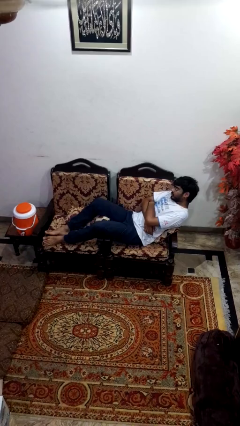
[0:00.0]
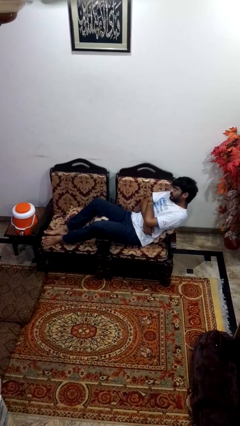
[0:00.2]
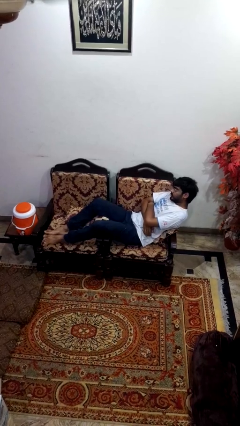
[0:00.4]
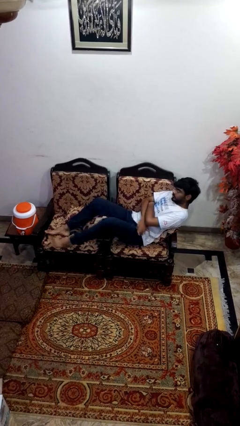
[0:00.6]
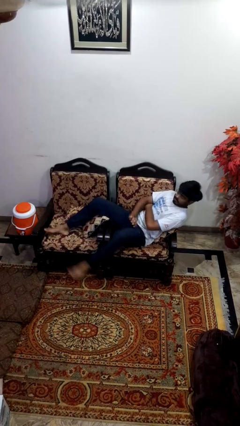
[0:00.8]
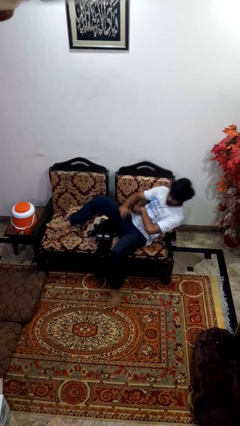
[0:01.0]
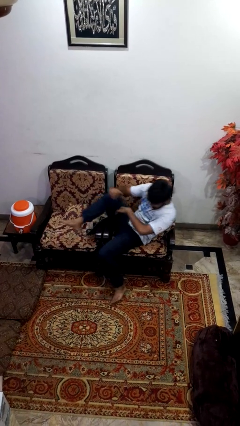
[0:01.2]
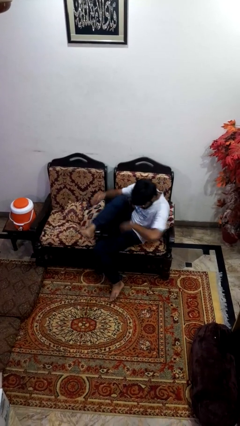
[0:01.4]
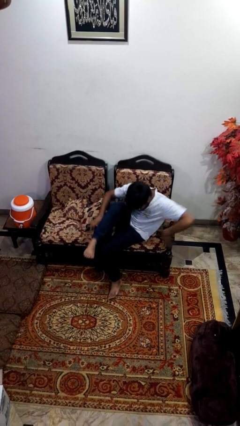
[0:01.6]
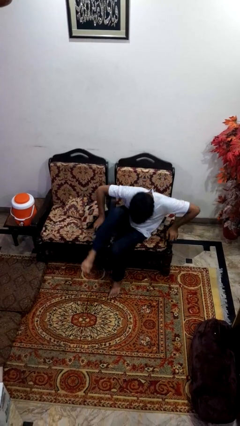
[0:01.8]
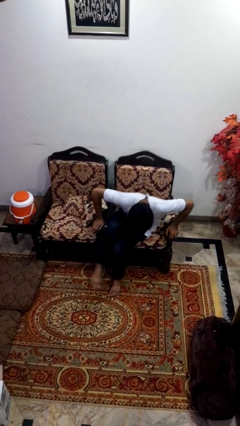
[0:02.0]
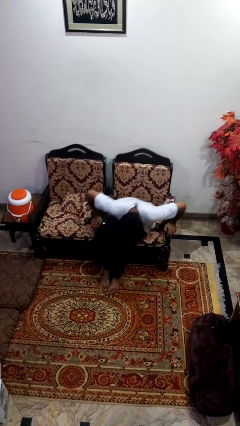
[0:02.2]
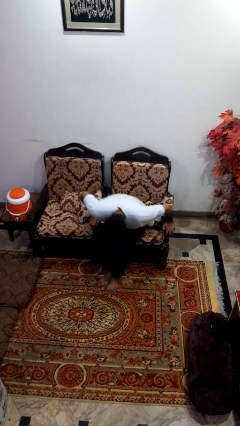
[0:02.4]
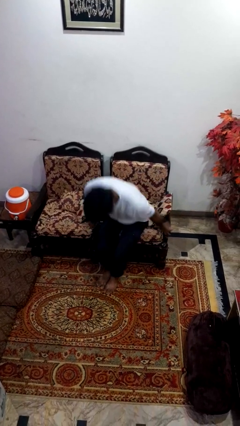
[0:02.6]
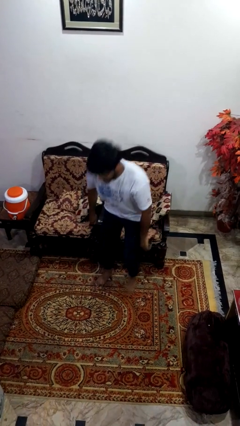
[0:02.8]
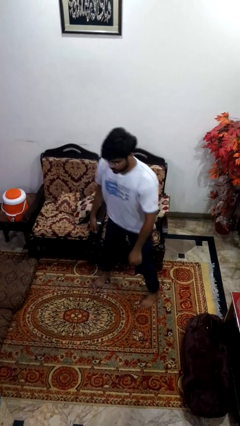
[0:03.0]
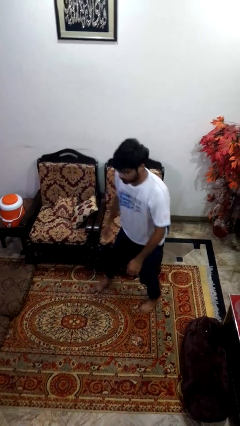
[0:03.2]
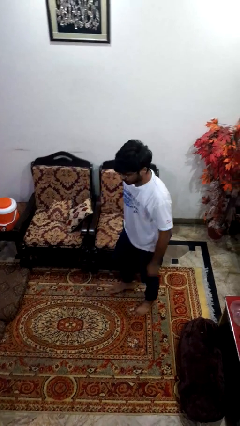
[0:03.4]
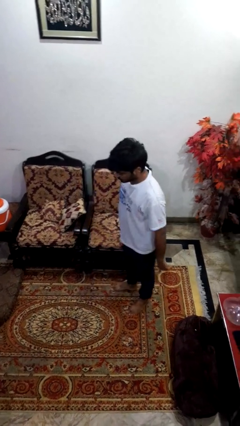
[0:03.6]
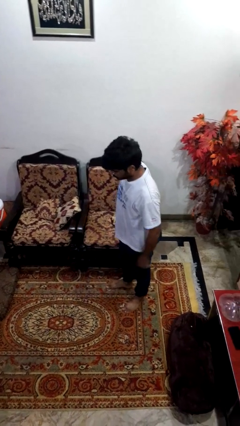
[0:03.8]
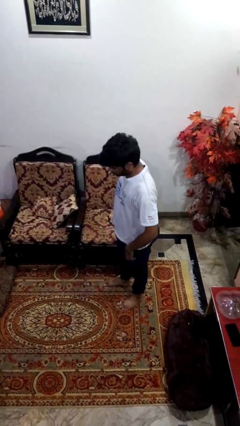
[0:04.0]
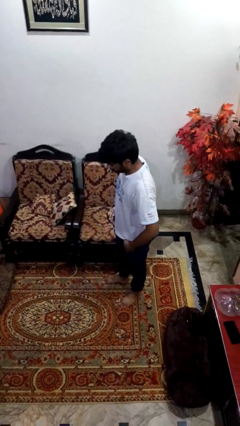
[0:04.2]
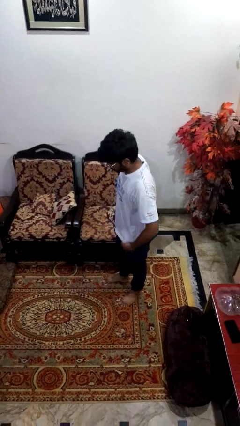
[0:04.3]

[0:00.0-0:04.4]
person stands up

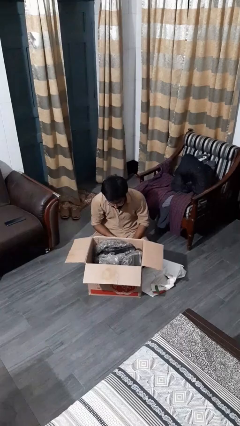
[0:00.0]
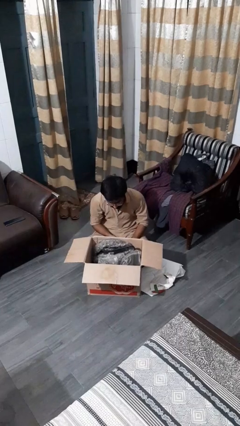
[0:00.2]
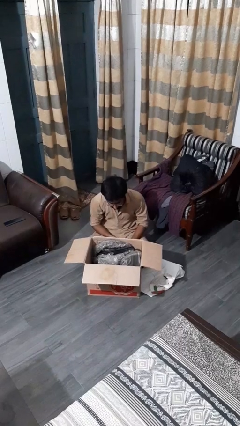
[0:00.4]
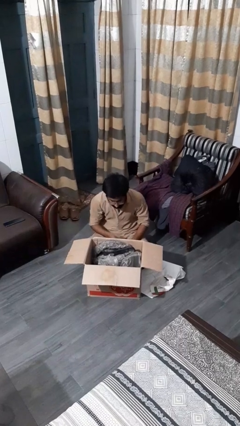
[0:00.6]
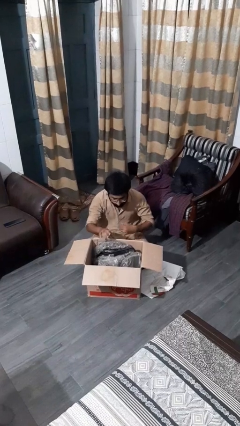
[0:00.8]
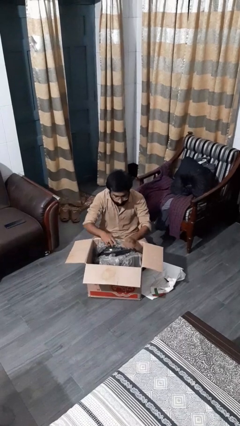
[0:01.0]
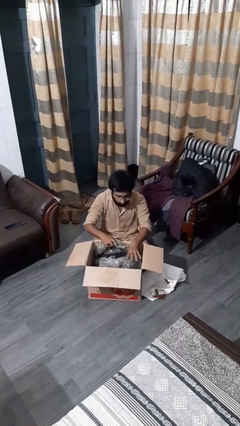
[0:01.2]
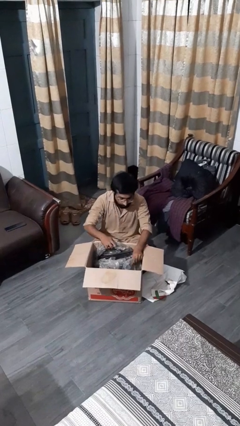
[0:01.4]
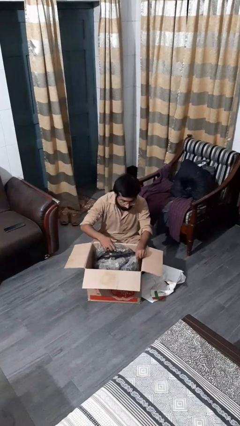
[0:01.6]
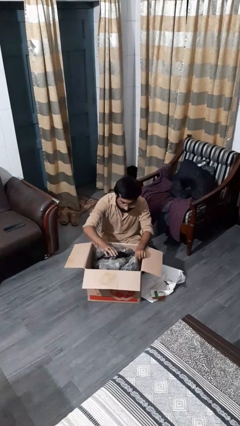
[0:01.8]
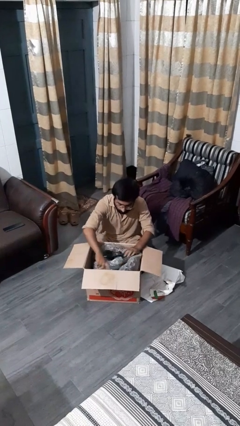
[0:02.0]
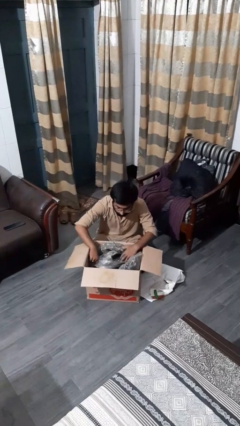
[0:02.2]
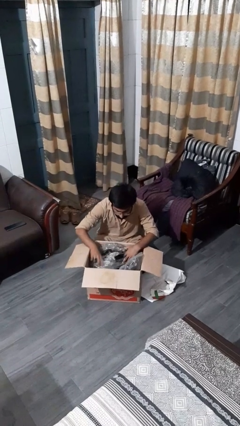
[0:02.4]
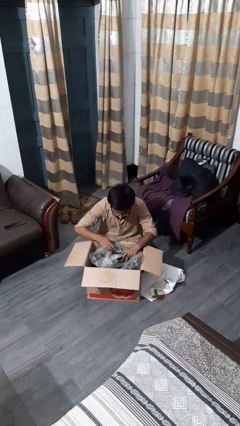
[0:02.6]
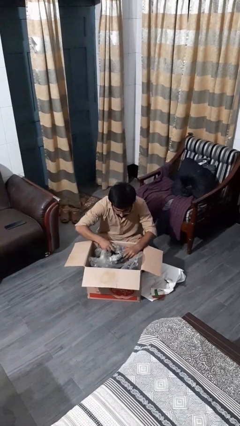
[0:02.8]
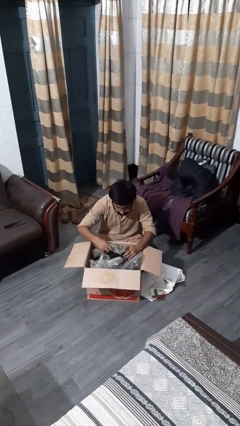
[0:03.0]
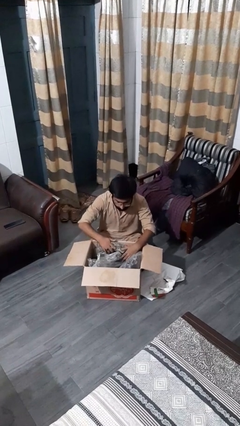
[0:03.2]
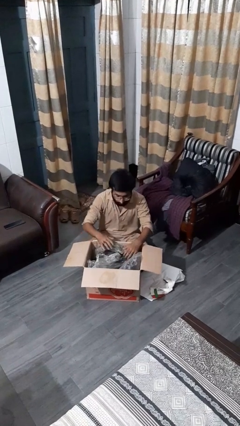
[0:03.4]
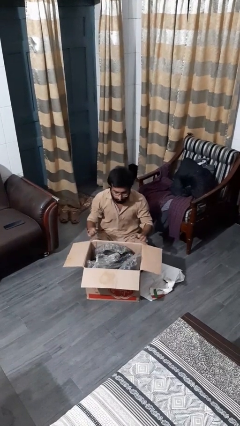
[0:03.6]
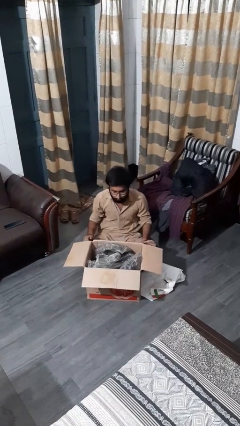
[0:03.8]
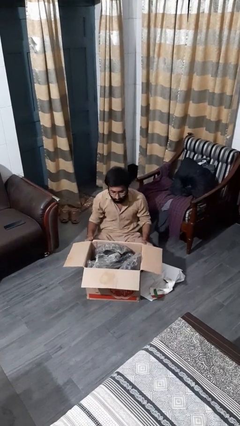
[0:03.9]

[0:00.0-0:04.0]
person searches in box

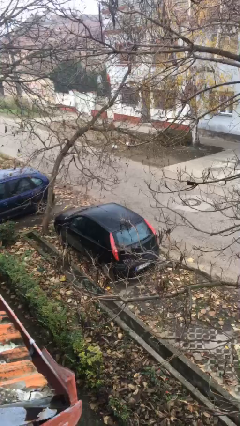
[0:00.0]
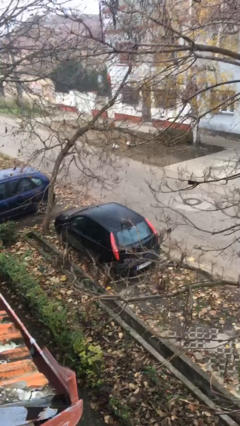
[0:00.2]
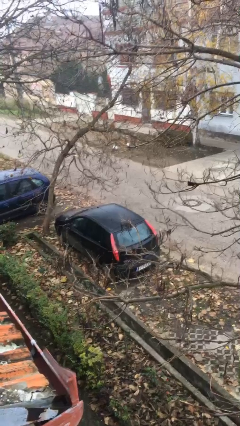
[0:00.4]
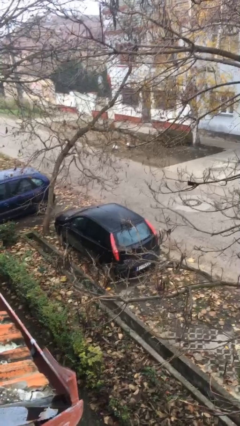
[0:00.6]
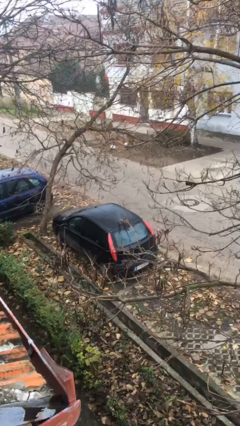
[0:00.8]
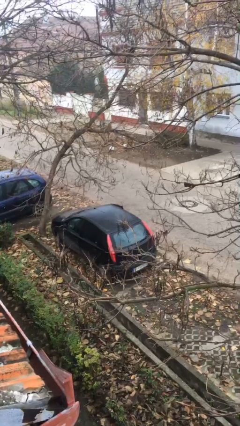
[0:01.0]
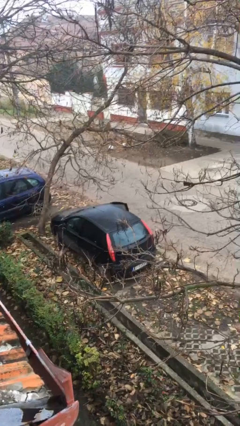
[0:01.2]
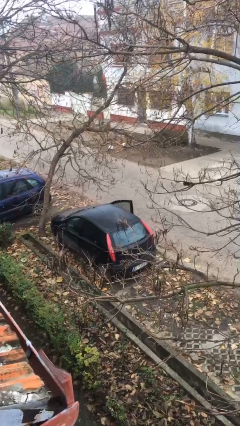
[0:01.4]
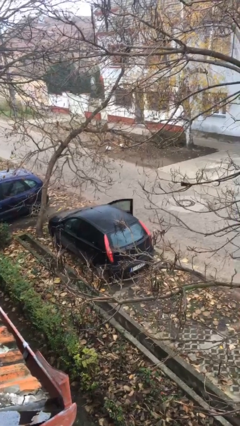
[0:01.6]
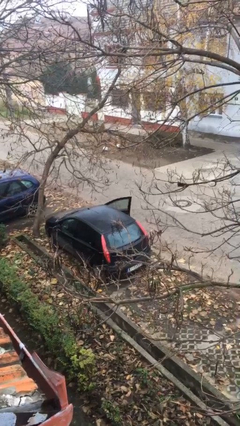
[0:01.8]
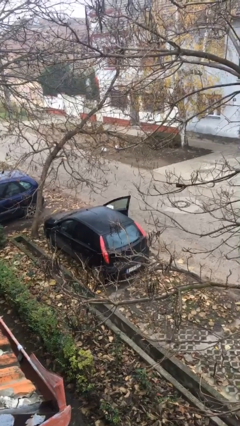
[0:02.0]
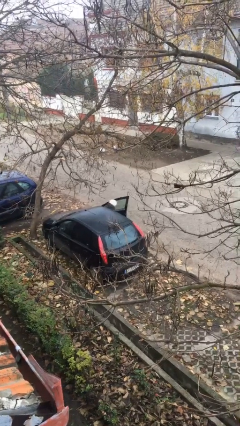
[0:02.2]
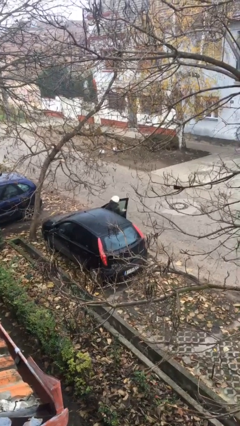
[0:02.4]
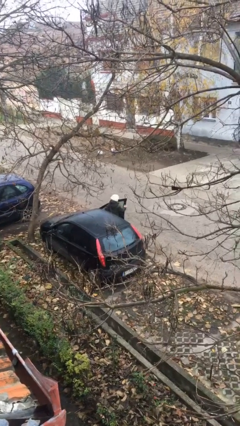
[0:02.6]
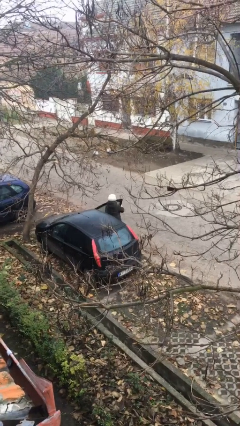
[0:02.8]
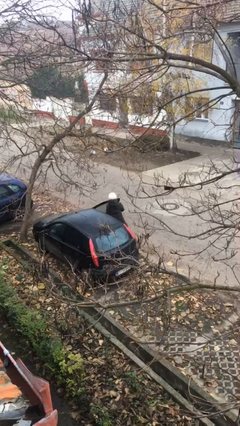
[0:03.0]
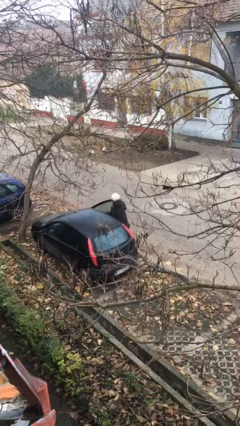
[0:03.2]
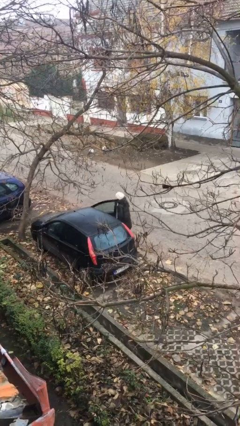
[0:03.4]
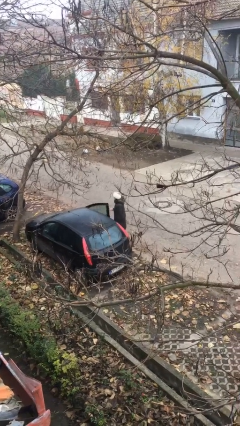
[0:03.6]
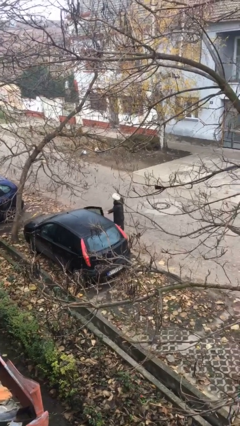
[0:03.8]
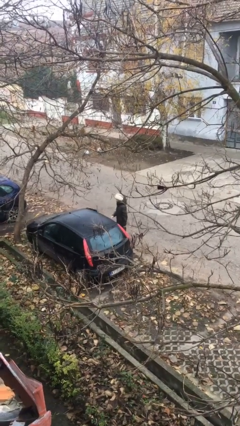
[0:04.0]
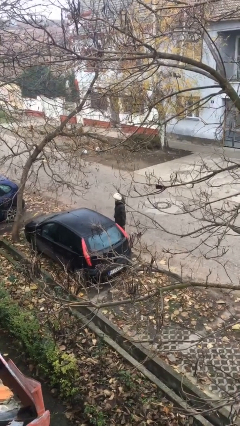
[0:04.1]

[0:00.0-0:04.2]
person exits car

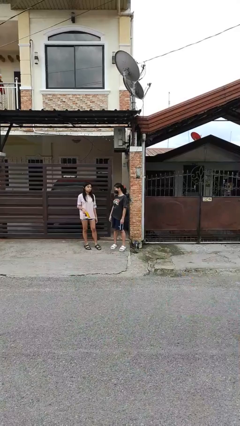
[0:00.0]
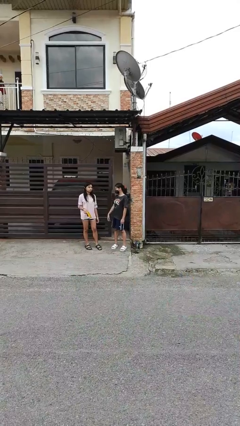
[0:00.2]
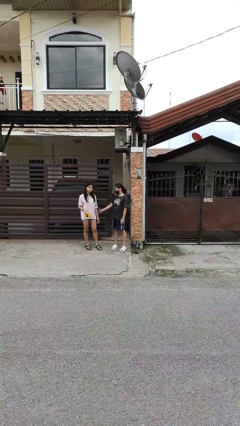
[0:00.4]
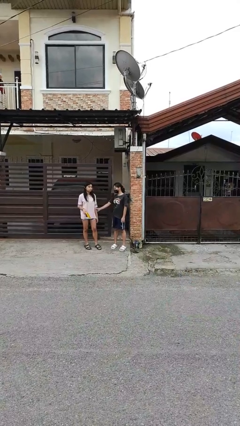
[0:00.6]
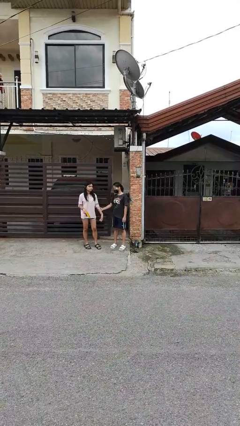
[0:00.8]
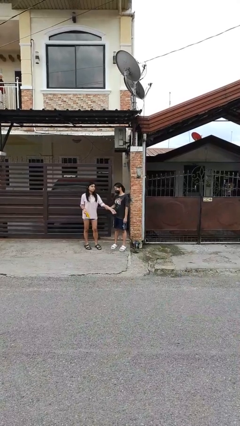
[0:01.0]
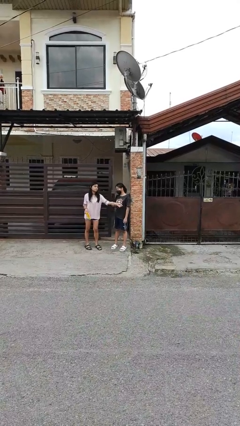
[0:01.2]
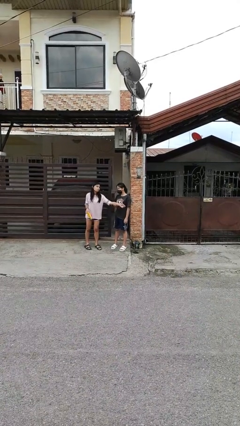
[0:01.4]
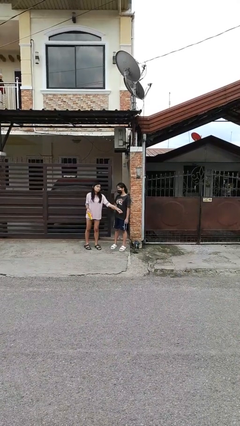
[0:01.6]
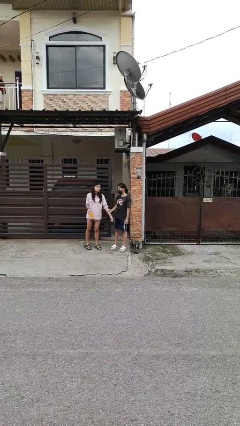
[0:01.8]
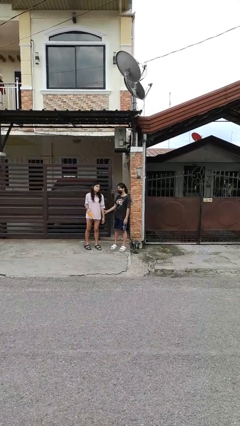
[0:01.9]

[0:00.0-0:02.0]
person grabs person by forearm

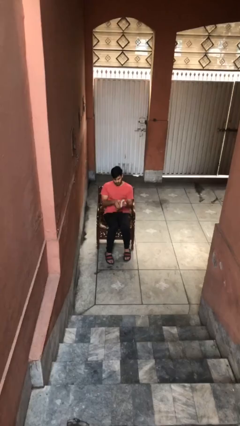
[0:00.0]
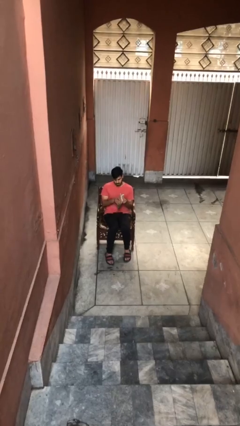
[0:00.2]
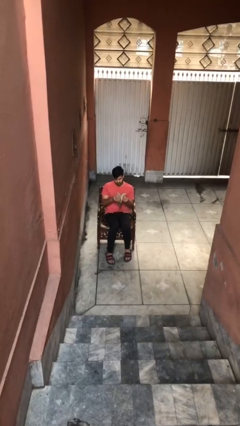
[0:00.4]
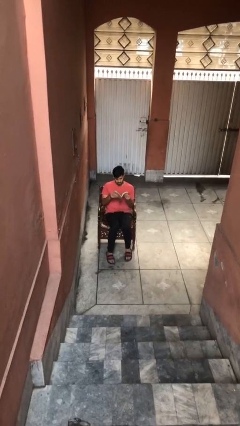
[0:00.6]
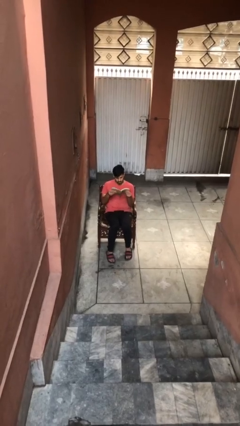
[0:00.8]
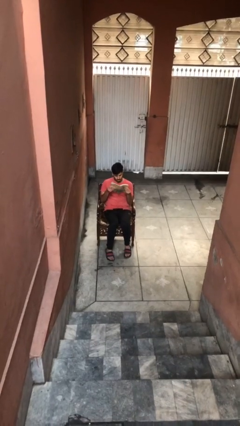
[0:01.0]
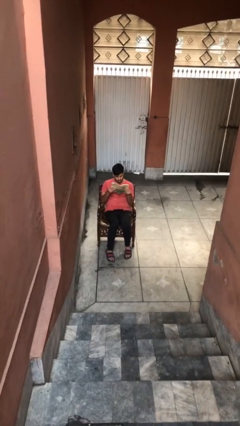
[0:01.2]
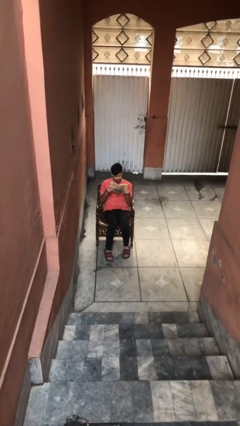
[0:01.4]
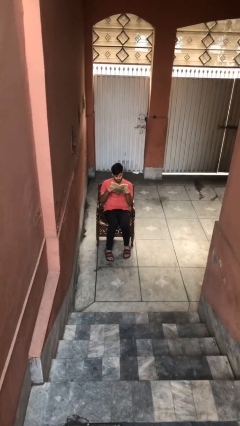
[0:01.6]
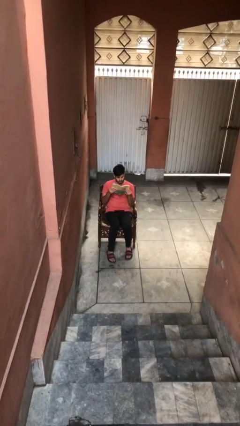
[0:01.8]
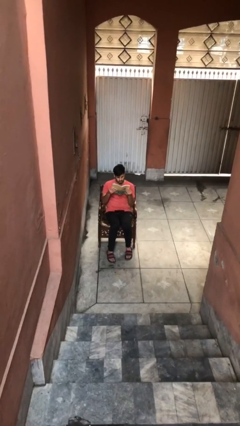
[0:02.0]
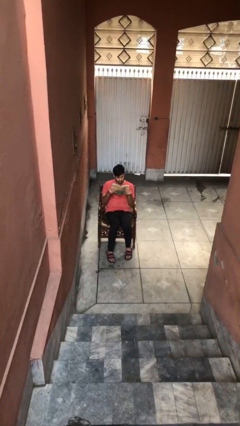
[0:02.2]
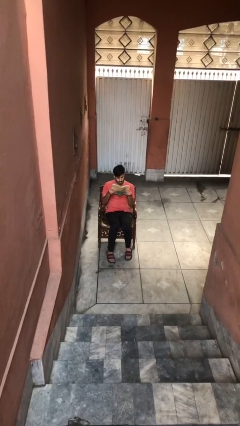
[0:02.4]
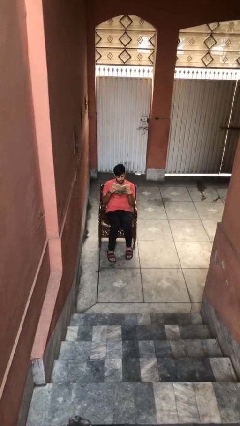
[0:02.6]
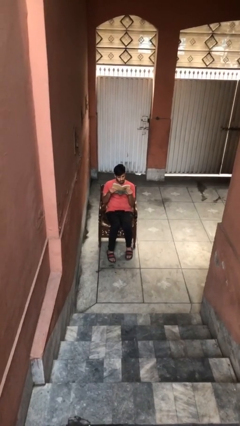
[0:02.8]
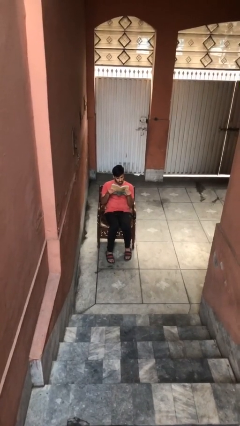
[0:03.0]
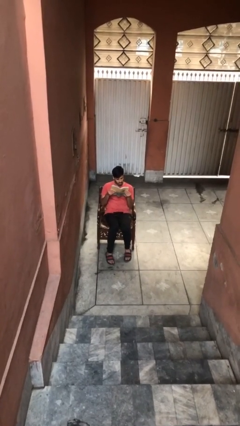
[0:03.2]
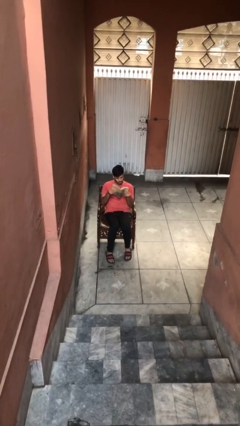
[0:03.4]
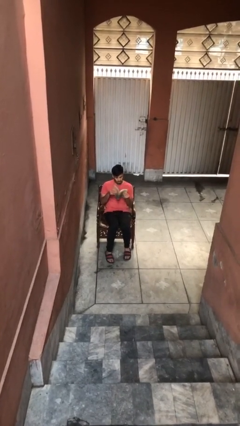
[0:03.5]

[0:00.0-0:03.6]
person reads document
